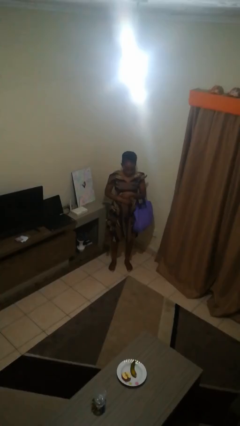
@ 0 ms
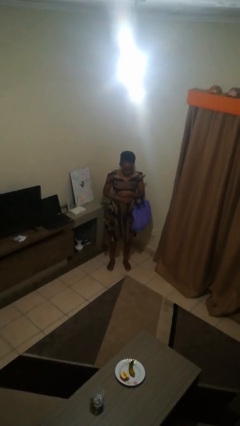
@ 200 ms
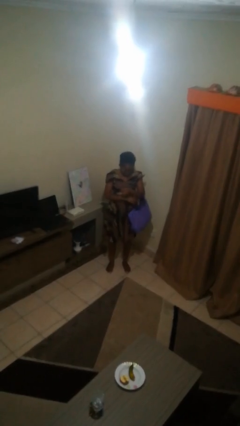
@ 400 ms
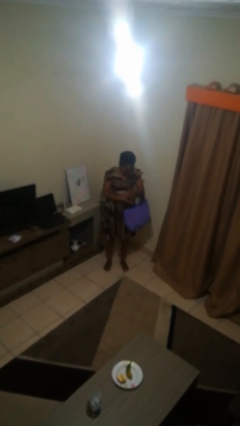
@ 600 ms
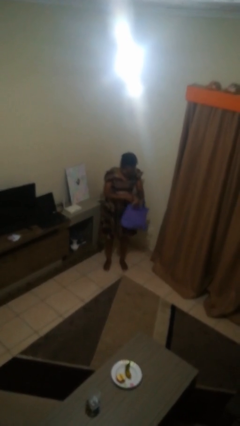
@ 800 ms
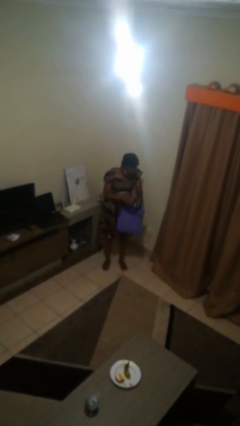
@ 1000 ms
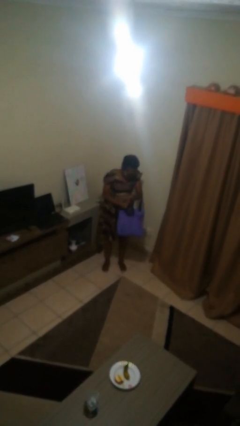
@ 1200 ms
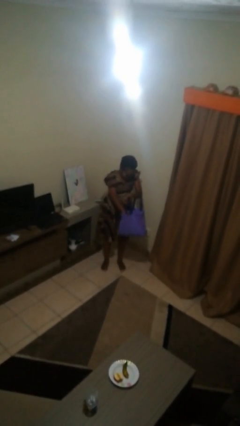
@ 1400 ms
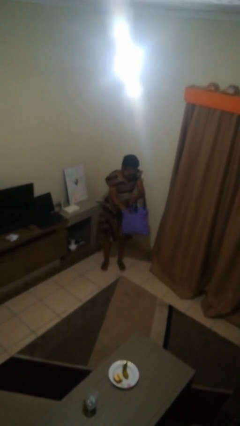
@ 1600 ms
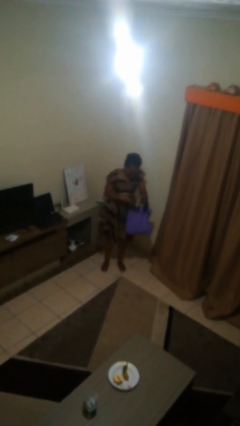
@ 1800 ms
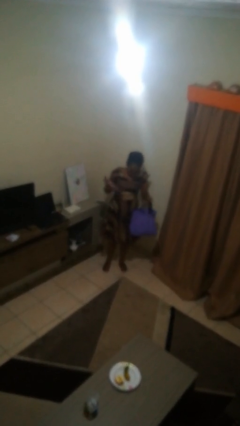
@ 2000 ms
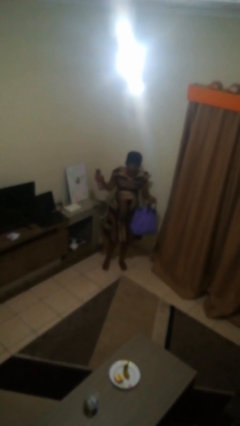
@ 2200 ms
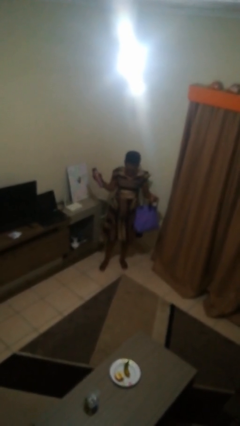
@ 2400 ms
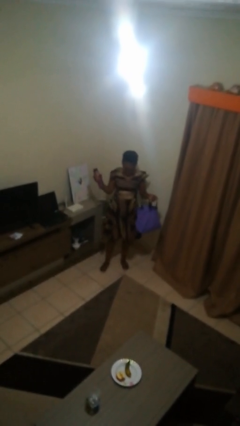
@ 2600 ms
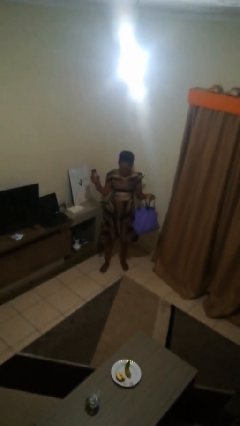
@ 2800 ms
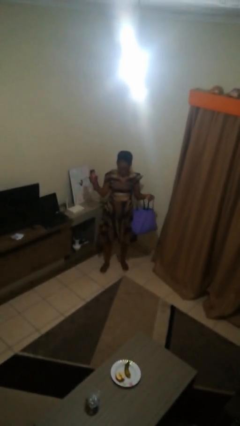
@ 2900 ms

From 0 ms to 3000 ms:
person takes object from bag
